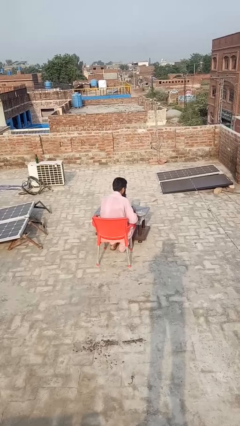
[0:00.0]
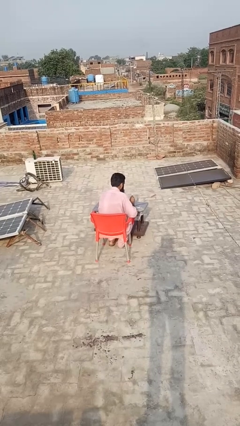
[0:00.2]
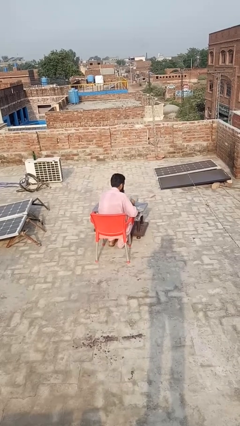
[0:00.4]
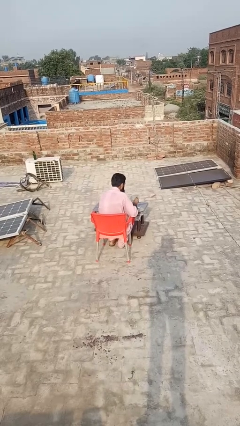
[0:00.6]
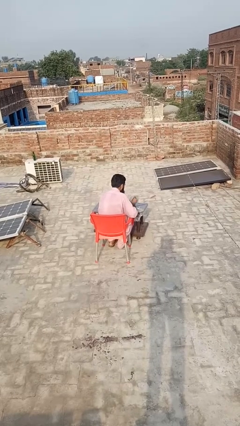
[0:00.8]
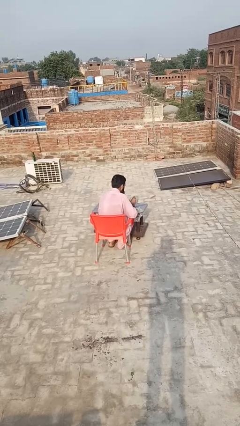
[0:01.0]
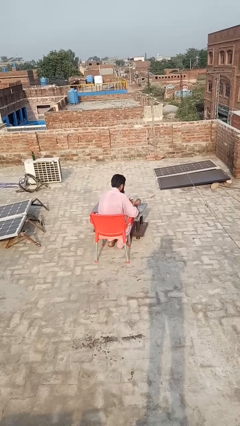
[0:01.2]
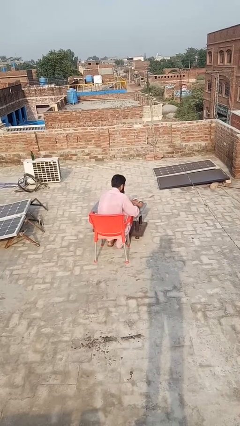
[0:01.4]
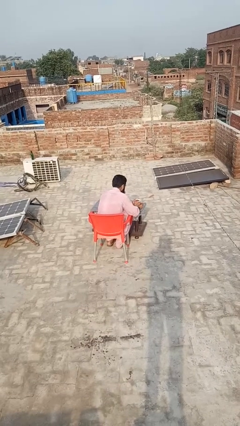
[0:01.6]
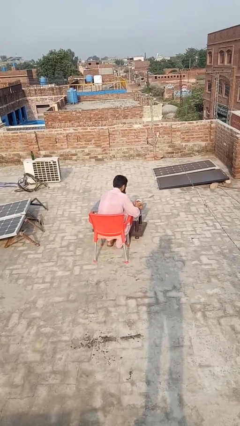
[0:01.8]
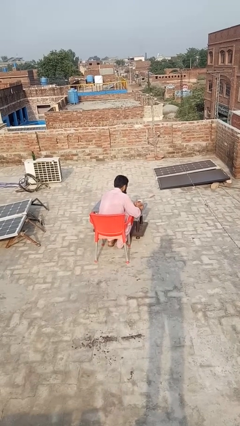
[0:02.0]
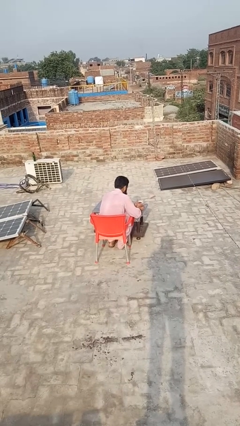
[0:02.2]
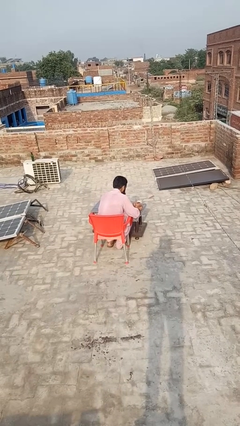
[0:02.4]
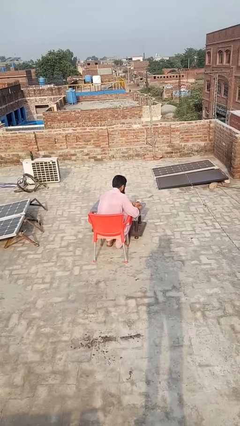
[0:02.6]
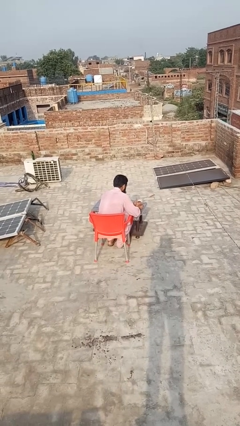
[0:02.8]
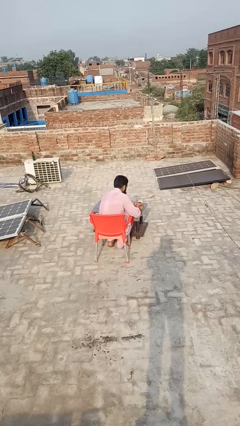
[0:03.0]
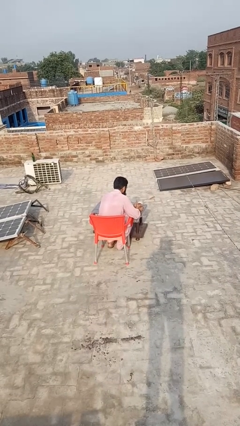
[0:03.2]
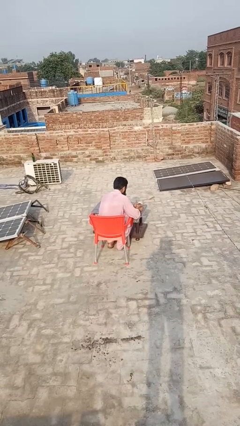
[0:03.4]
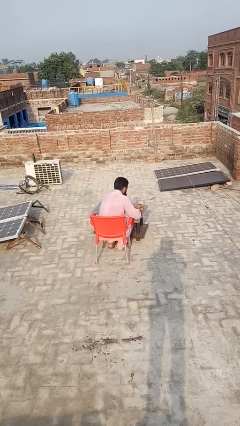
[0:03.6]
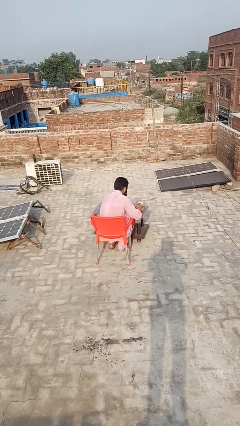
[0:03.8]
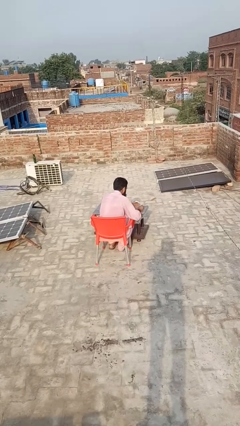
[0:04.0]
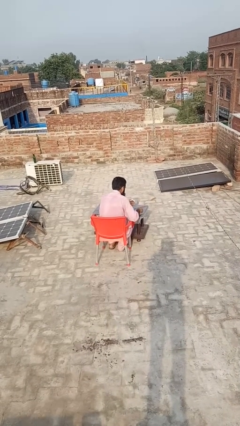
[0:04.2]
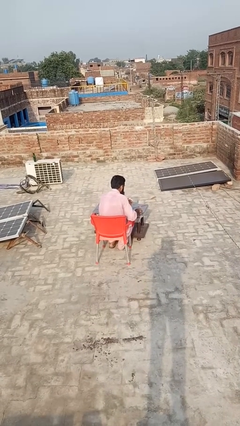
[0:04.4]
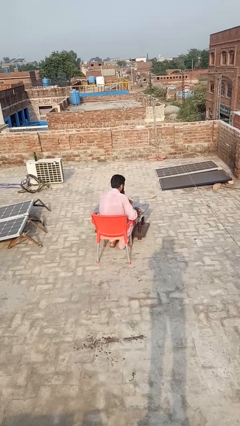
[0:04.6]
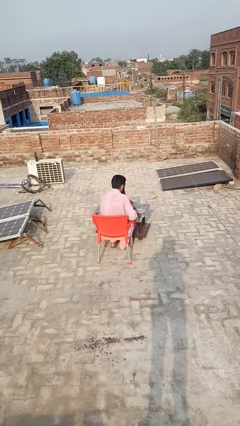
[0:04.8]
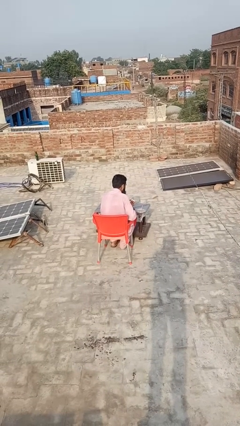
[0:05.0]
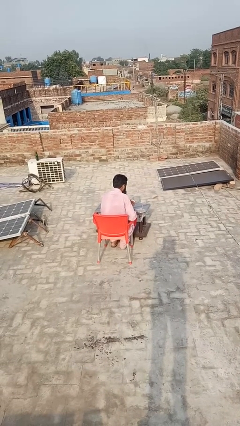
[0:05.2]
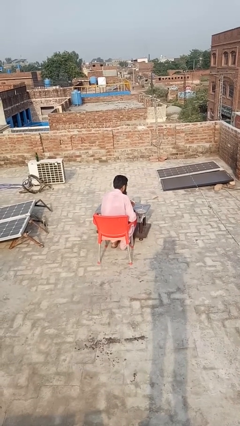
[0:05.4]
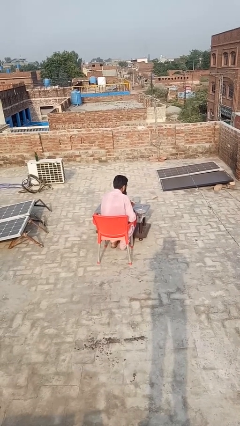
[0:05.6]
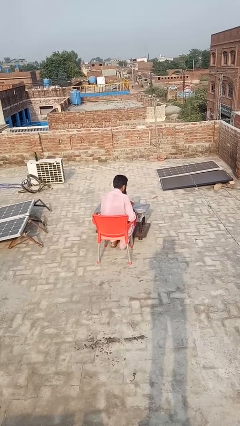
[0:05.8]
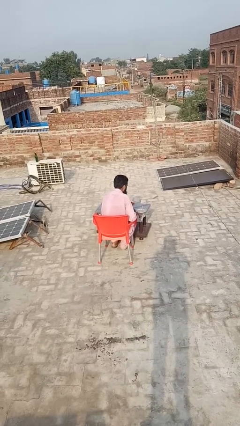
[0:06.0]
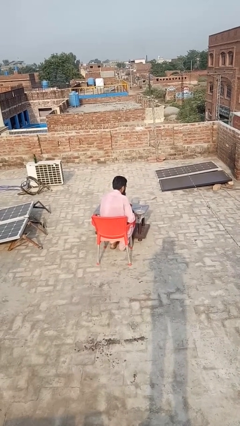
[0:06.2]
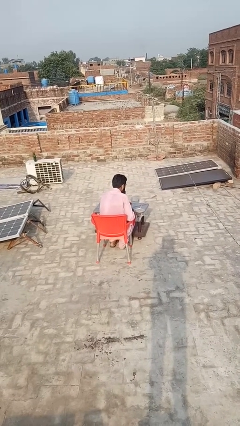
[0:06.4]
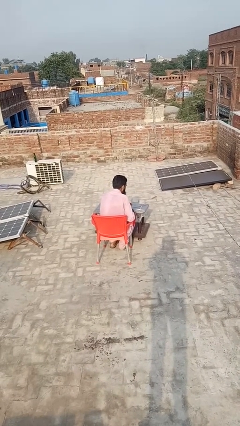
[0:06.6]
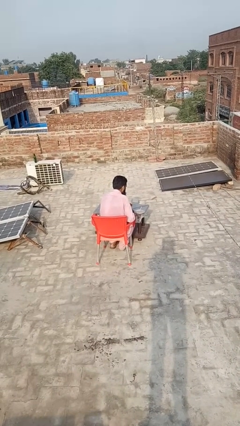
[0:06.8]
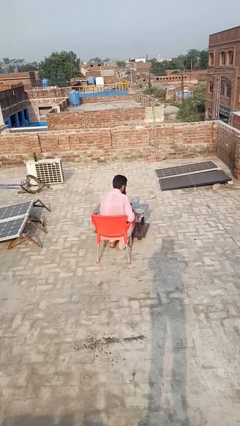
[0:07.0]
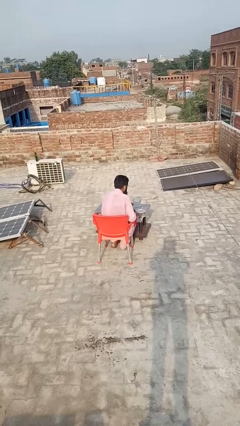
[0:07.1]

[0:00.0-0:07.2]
person lights candle

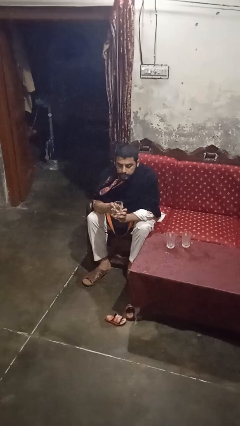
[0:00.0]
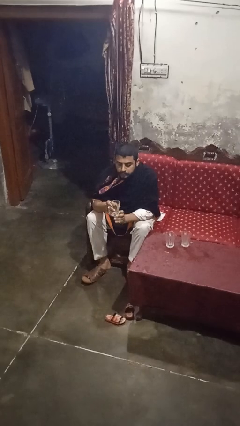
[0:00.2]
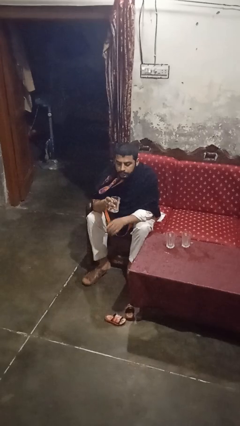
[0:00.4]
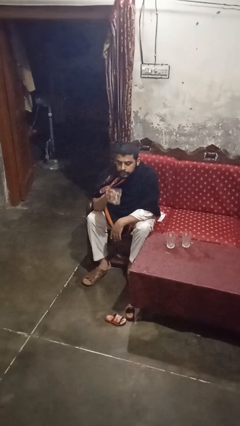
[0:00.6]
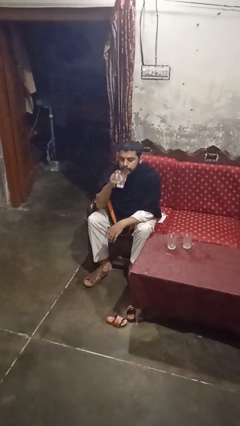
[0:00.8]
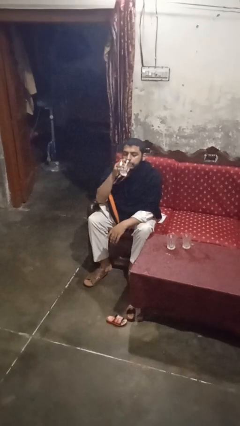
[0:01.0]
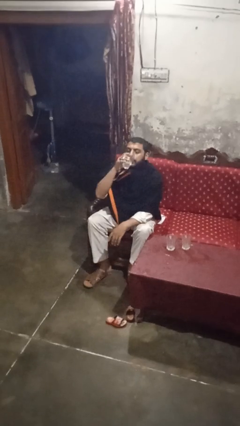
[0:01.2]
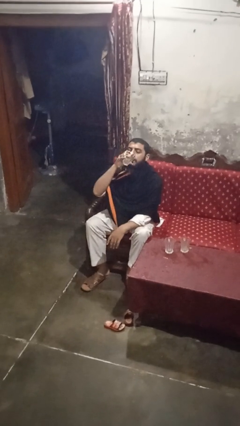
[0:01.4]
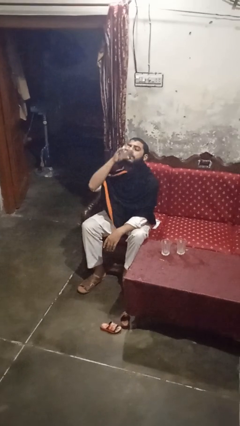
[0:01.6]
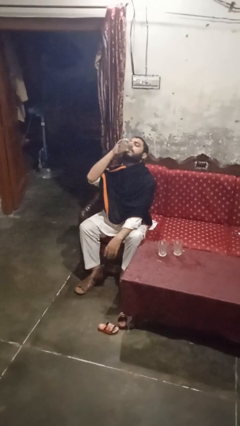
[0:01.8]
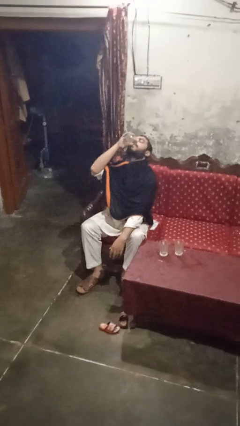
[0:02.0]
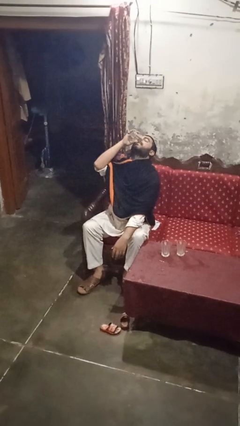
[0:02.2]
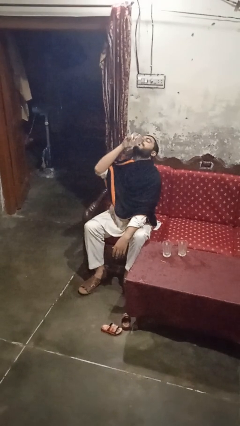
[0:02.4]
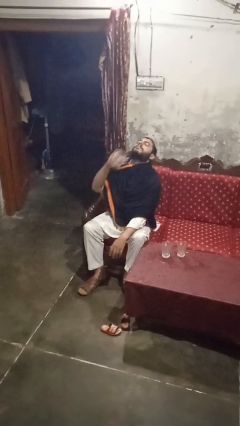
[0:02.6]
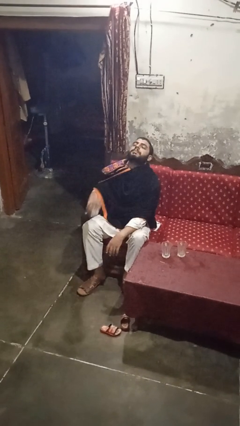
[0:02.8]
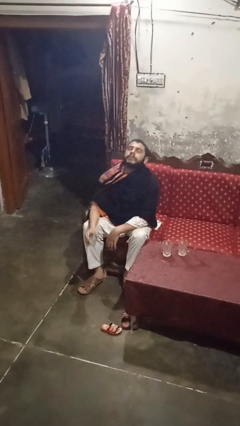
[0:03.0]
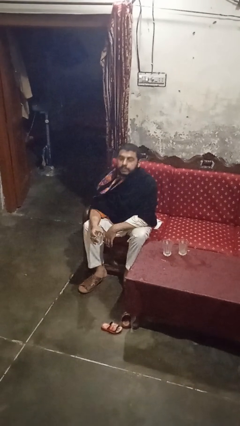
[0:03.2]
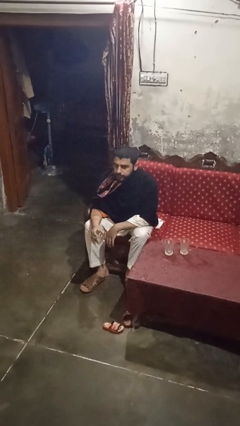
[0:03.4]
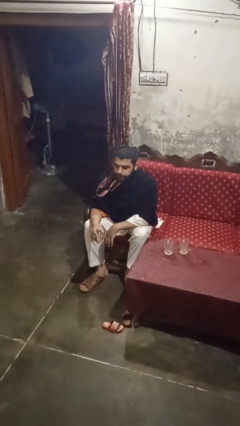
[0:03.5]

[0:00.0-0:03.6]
person drinks from shotglass

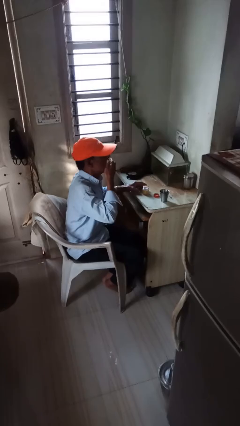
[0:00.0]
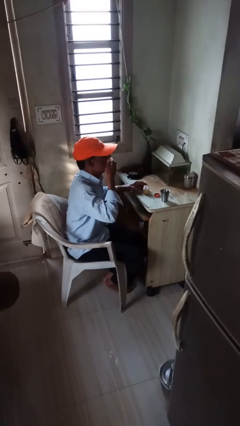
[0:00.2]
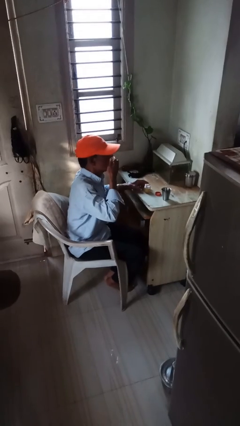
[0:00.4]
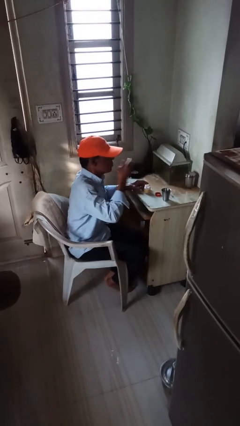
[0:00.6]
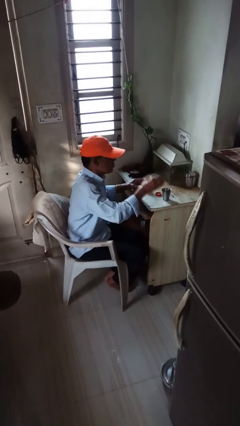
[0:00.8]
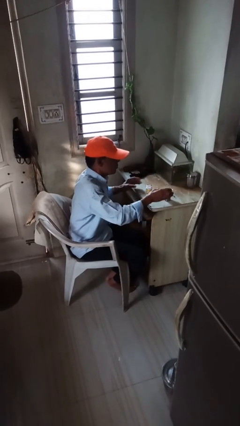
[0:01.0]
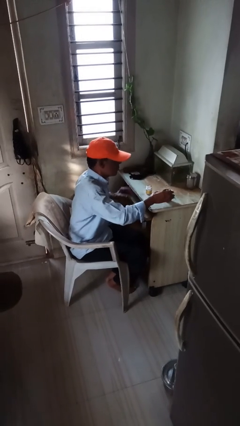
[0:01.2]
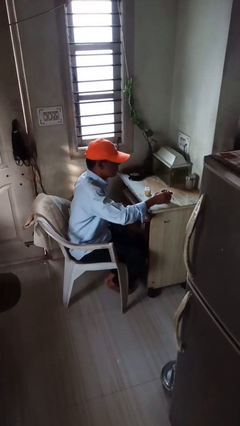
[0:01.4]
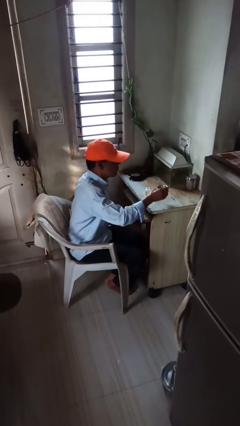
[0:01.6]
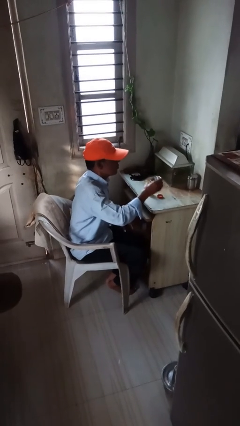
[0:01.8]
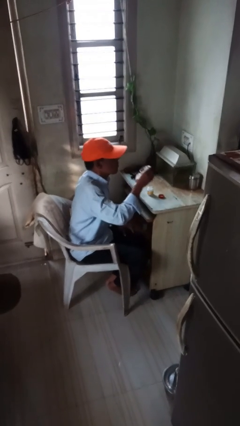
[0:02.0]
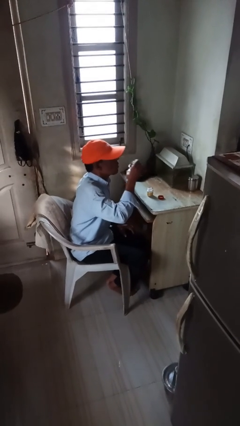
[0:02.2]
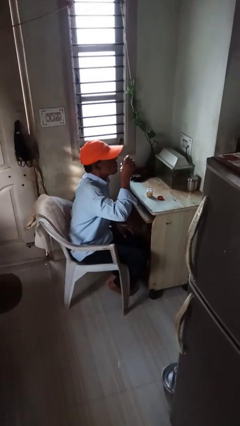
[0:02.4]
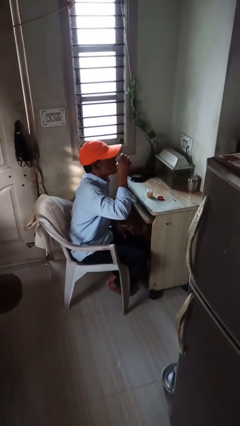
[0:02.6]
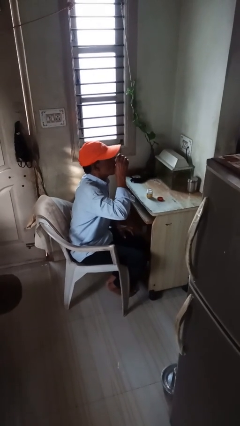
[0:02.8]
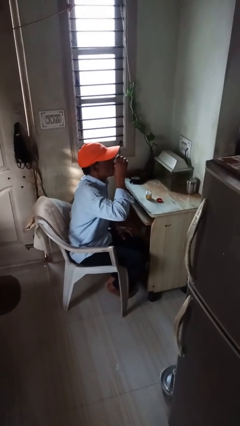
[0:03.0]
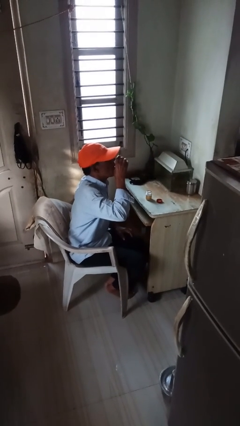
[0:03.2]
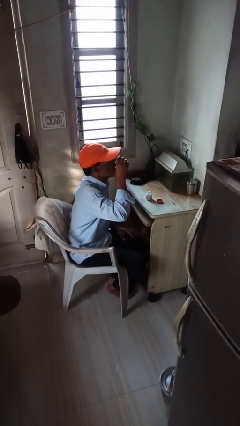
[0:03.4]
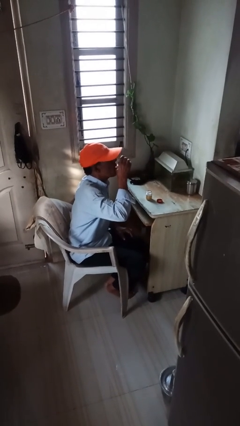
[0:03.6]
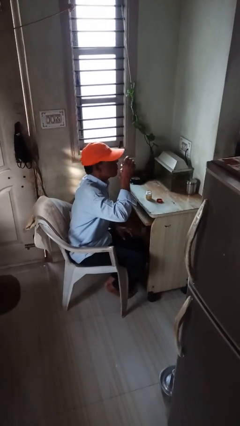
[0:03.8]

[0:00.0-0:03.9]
person drinks from cup

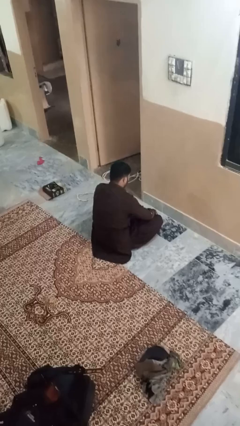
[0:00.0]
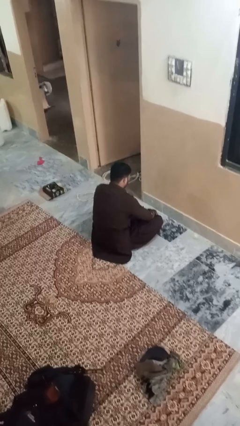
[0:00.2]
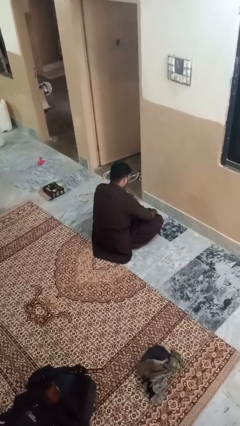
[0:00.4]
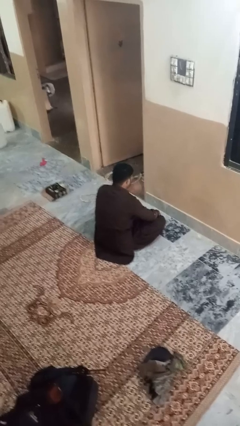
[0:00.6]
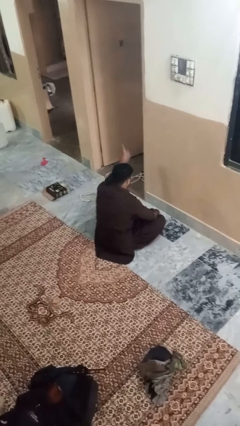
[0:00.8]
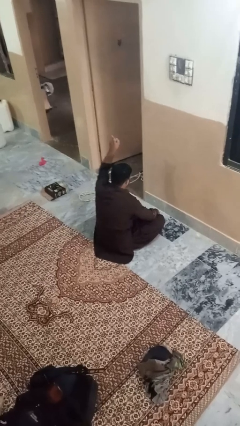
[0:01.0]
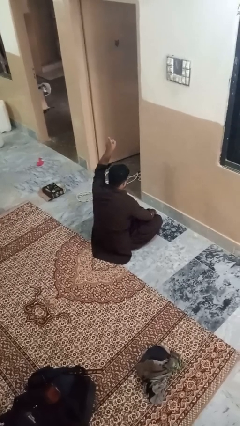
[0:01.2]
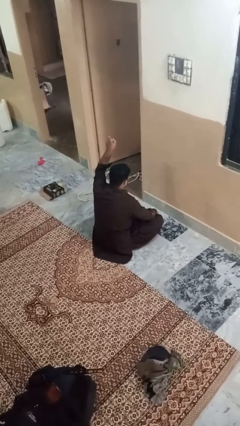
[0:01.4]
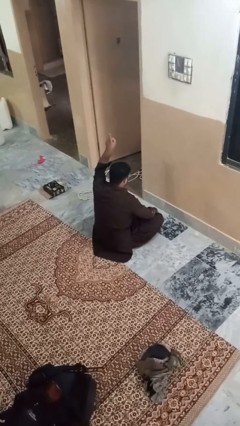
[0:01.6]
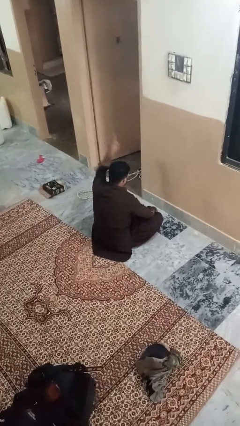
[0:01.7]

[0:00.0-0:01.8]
person gestures number one

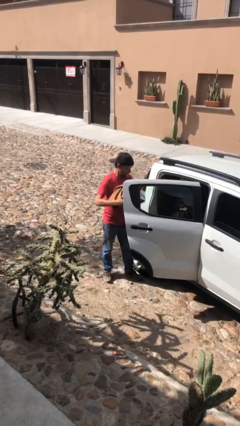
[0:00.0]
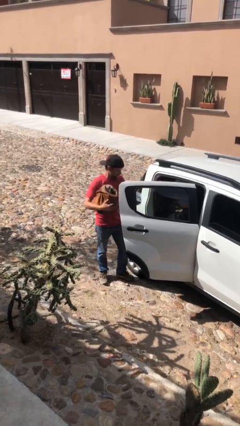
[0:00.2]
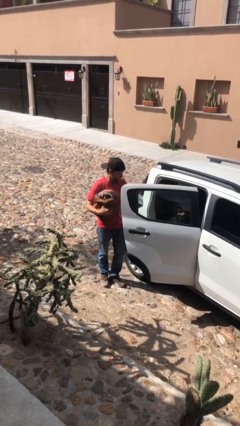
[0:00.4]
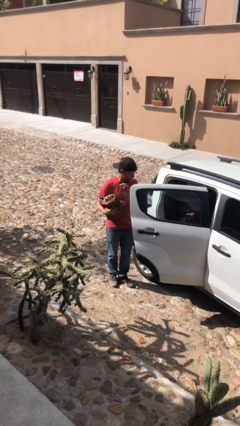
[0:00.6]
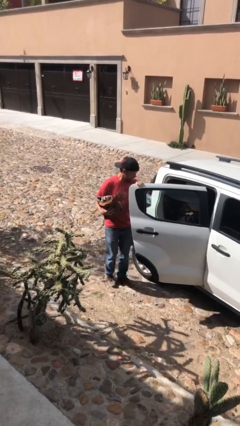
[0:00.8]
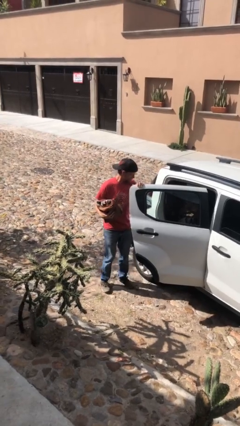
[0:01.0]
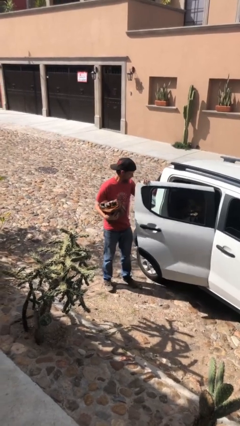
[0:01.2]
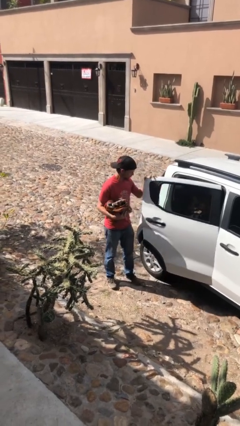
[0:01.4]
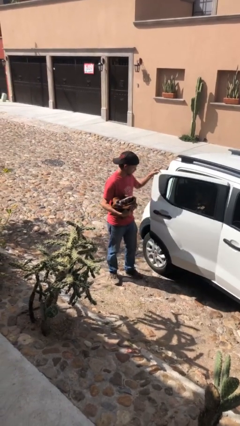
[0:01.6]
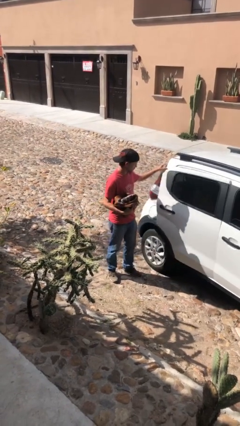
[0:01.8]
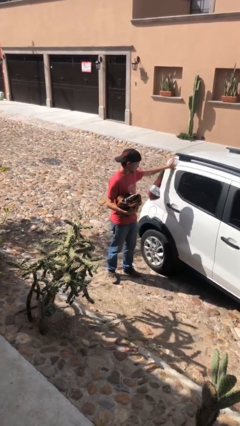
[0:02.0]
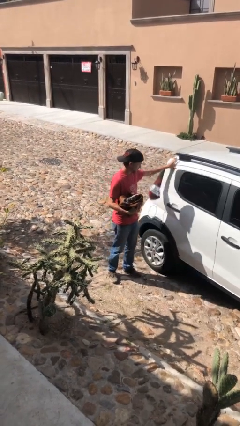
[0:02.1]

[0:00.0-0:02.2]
person closes car door
